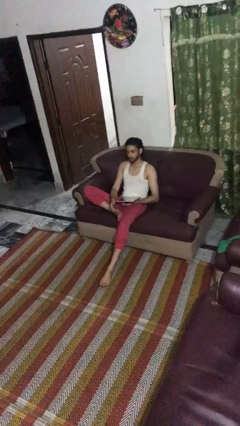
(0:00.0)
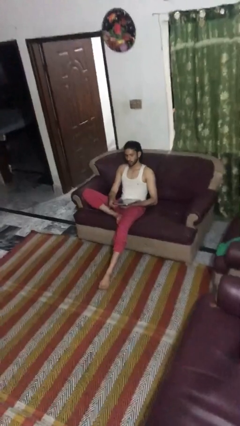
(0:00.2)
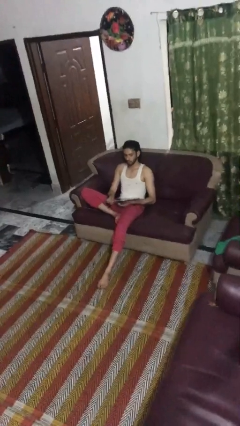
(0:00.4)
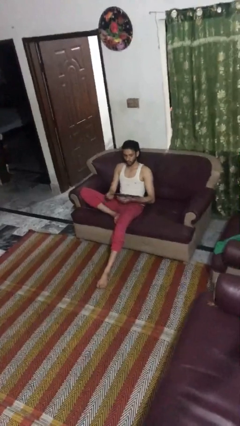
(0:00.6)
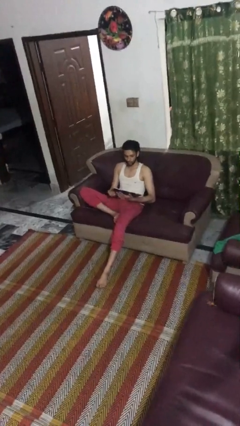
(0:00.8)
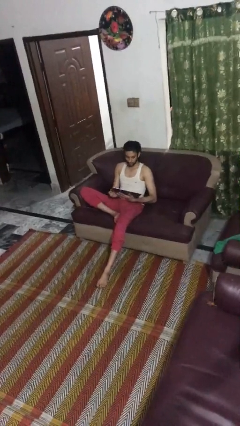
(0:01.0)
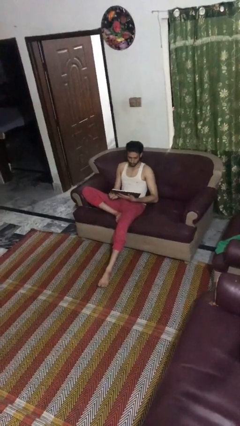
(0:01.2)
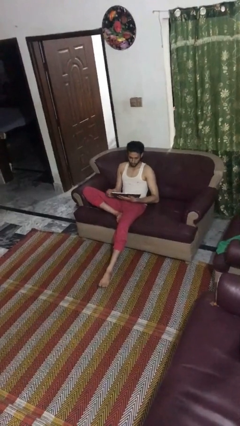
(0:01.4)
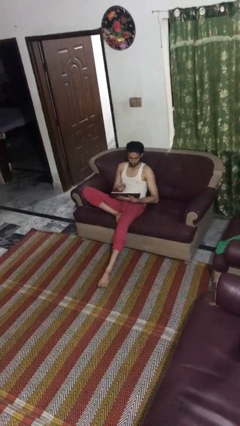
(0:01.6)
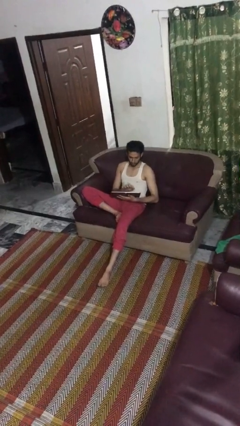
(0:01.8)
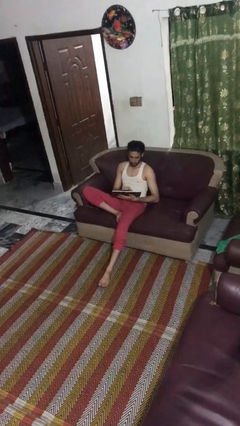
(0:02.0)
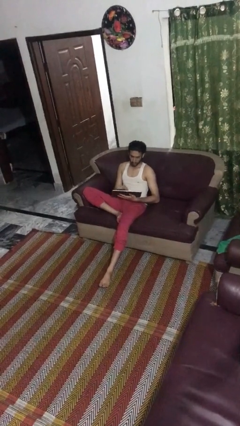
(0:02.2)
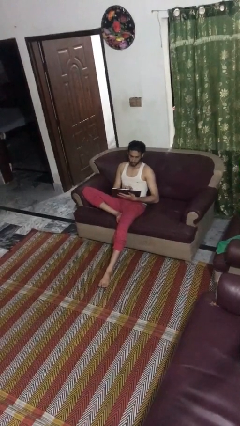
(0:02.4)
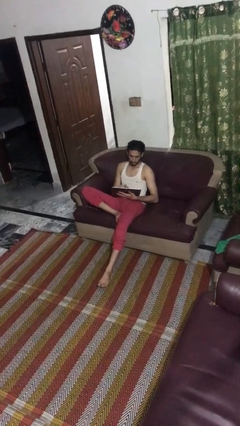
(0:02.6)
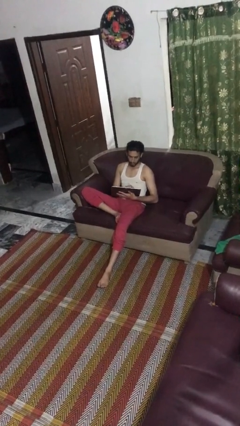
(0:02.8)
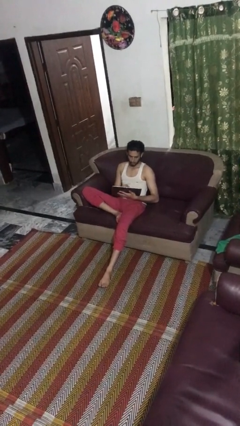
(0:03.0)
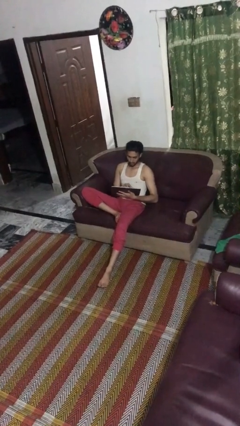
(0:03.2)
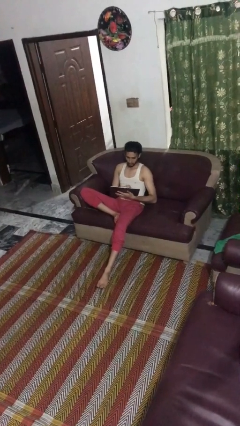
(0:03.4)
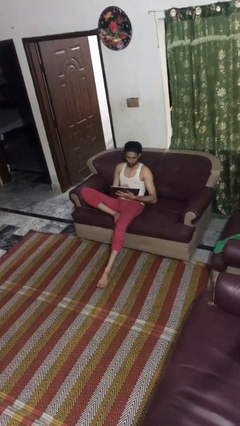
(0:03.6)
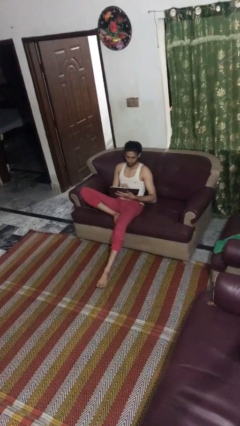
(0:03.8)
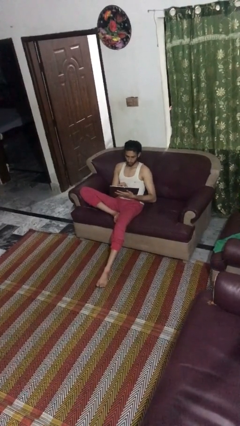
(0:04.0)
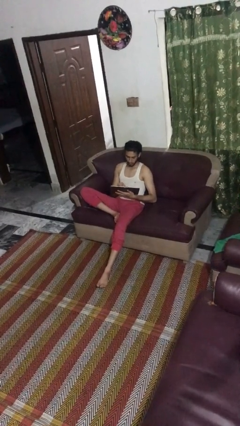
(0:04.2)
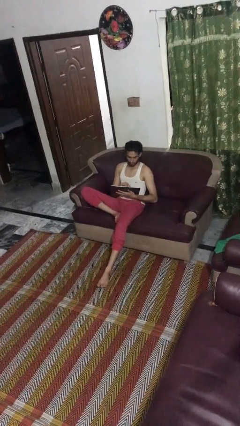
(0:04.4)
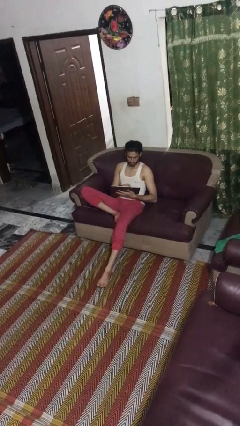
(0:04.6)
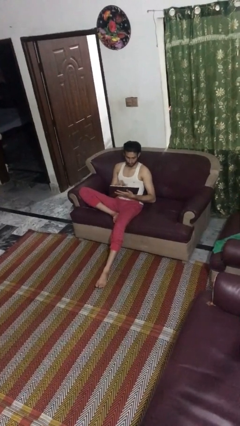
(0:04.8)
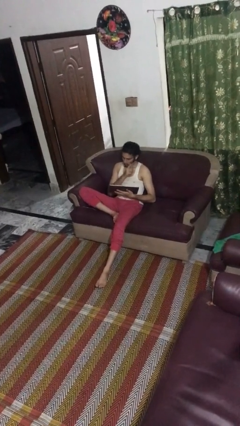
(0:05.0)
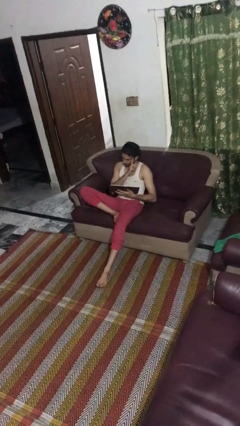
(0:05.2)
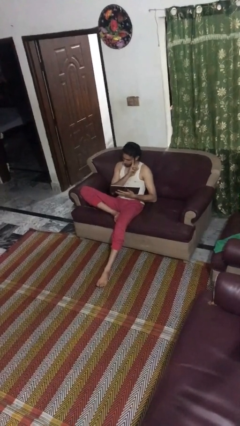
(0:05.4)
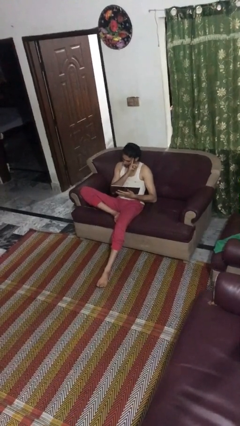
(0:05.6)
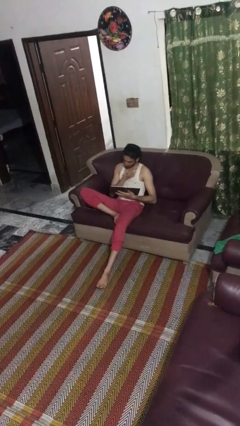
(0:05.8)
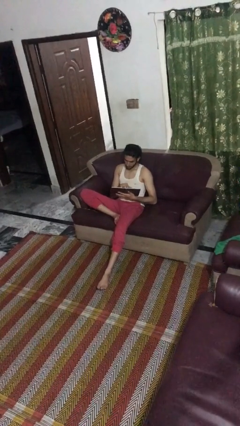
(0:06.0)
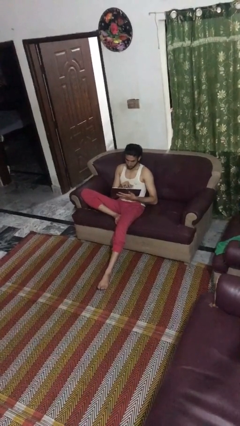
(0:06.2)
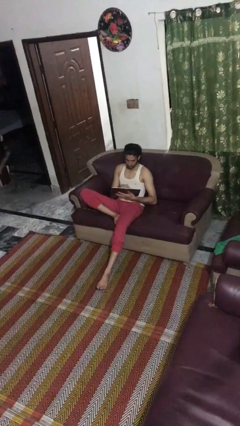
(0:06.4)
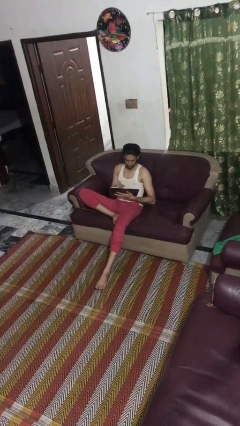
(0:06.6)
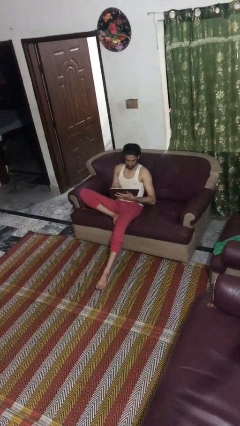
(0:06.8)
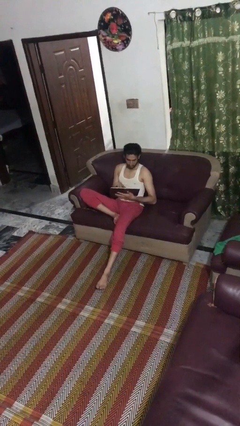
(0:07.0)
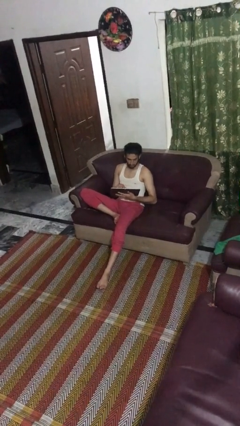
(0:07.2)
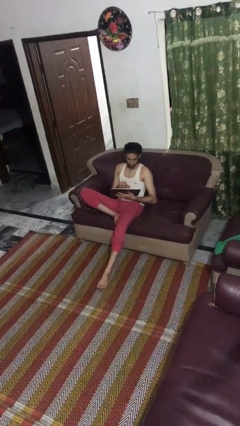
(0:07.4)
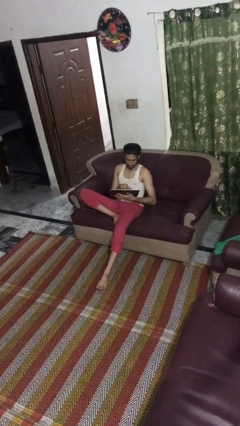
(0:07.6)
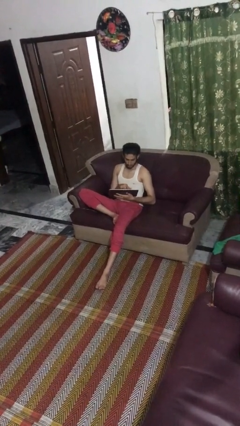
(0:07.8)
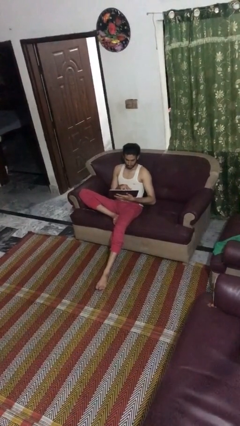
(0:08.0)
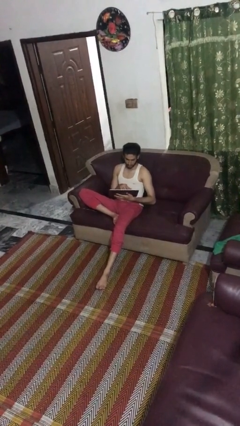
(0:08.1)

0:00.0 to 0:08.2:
person interacts with tablet

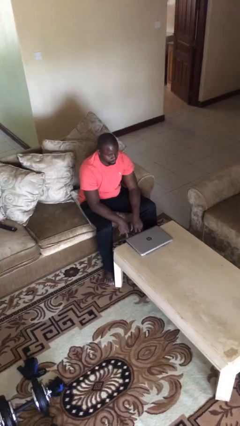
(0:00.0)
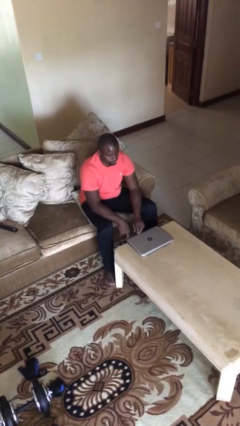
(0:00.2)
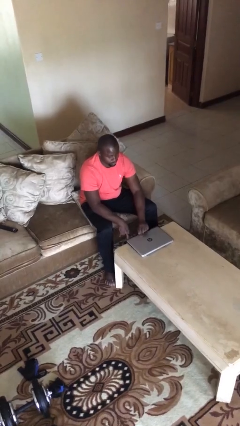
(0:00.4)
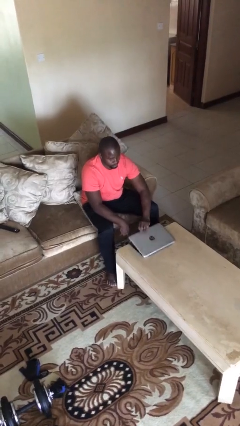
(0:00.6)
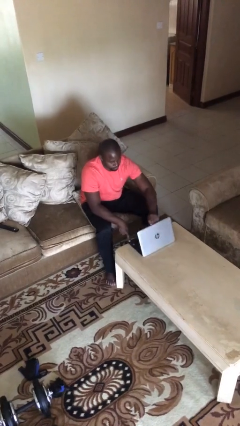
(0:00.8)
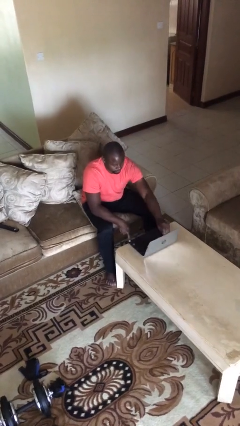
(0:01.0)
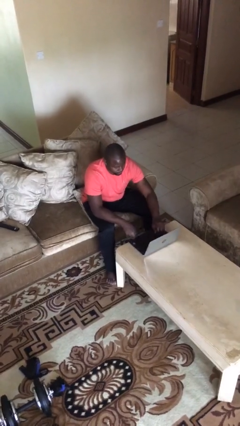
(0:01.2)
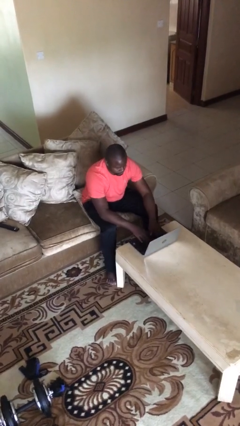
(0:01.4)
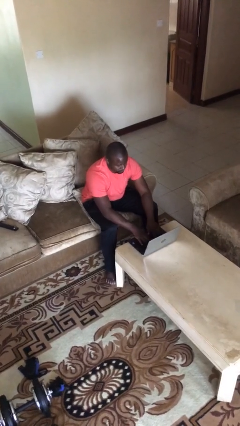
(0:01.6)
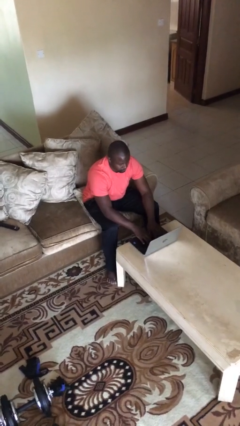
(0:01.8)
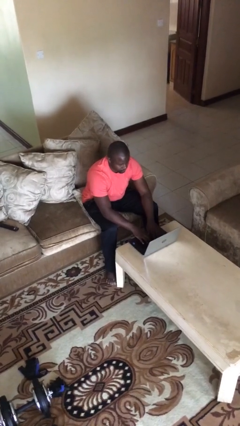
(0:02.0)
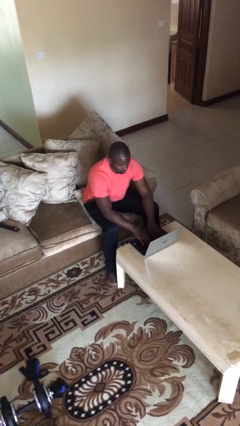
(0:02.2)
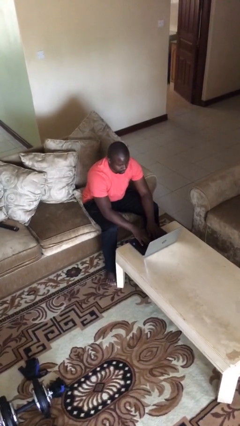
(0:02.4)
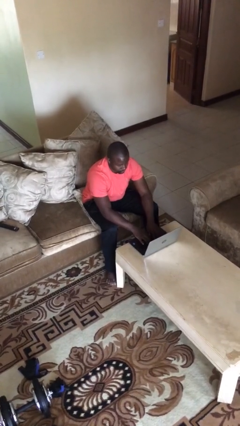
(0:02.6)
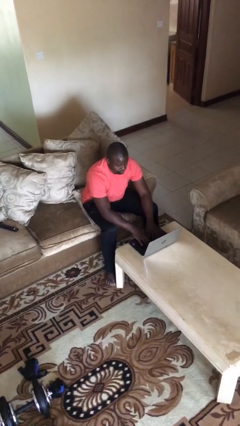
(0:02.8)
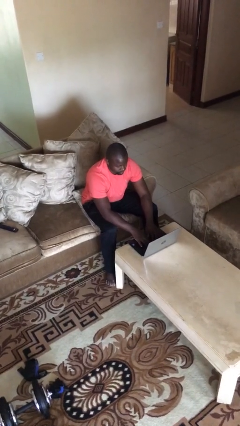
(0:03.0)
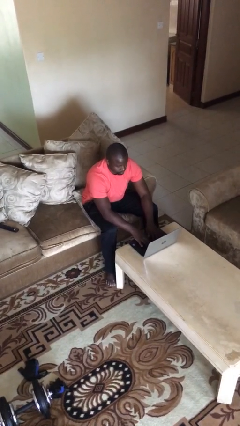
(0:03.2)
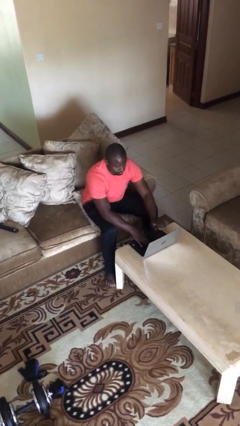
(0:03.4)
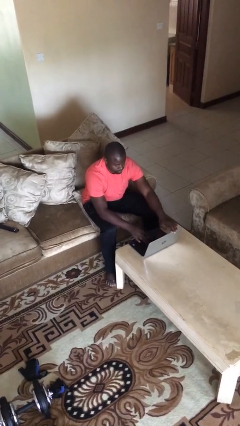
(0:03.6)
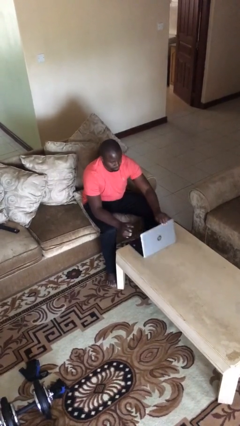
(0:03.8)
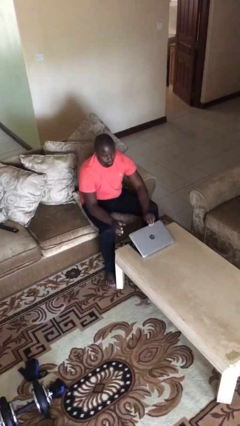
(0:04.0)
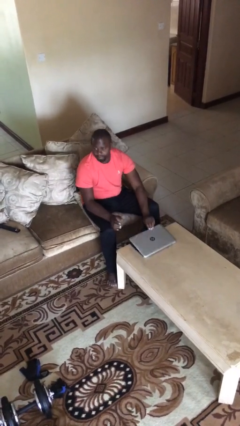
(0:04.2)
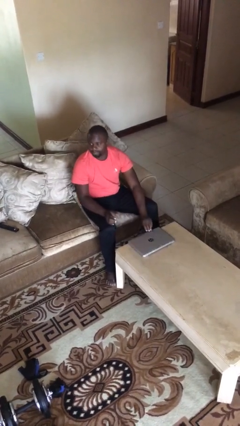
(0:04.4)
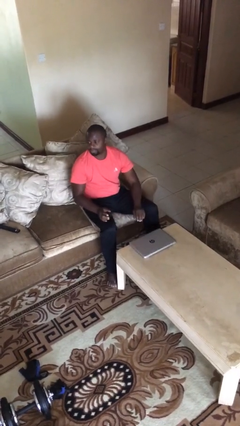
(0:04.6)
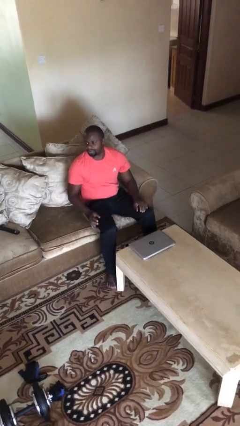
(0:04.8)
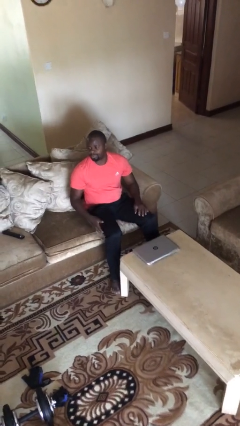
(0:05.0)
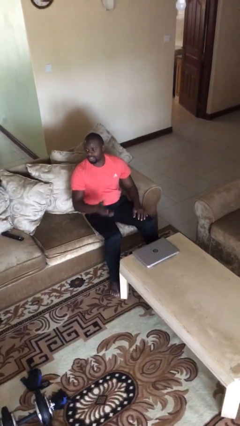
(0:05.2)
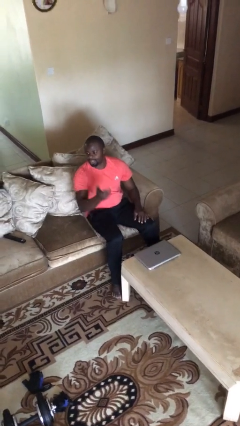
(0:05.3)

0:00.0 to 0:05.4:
person interacts with laptop

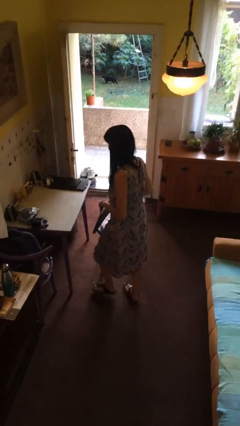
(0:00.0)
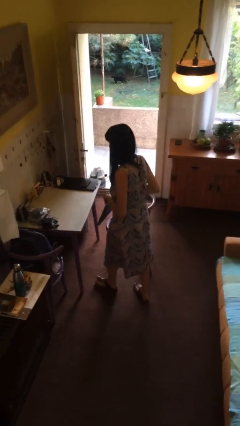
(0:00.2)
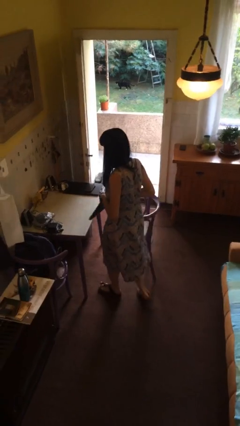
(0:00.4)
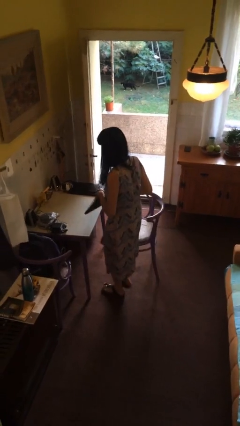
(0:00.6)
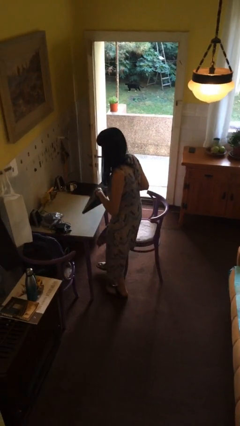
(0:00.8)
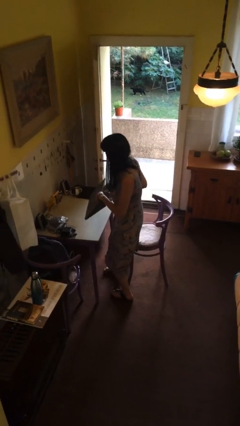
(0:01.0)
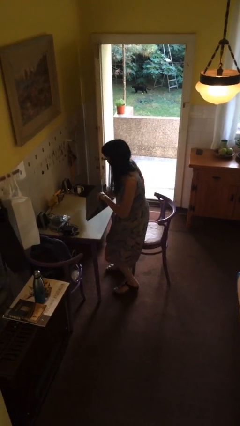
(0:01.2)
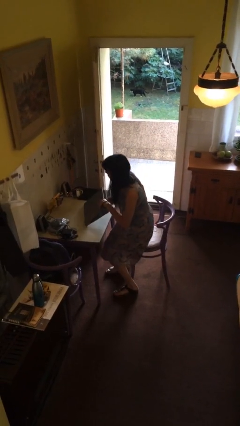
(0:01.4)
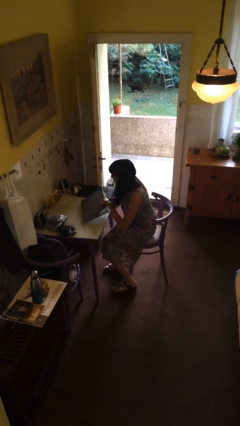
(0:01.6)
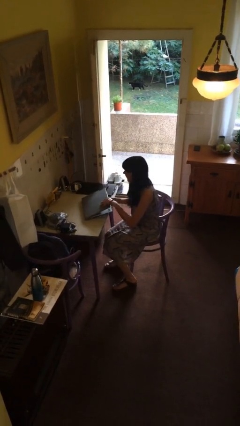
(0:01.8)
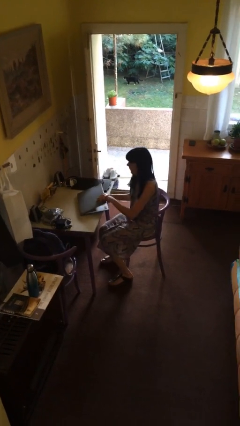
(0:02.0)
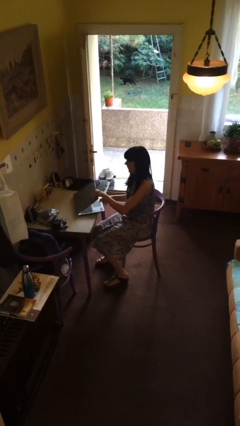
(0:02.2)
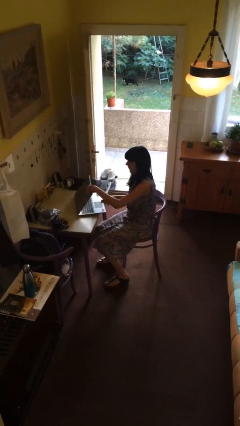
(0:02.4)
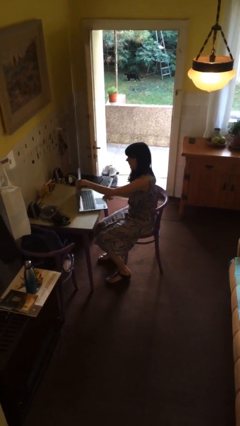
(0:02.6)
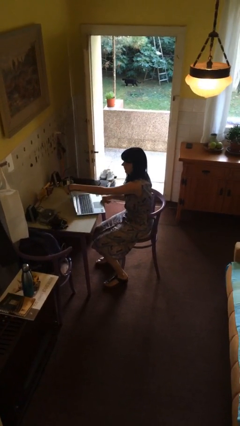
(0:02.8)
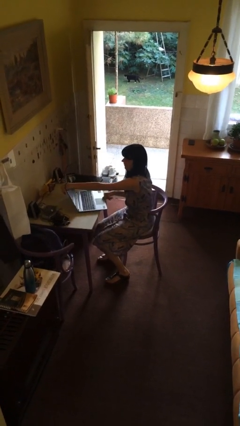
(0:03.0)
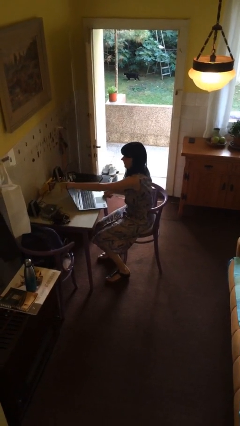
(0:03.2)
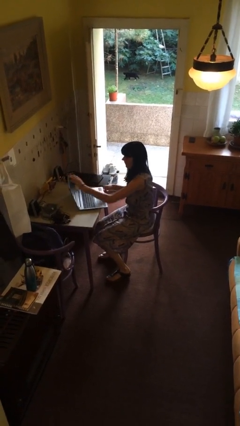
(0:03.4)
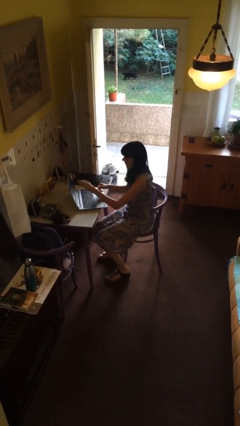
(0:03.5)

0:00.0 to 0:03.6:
person sits down
